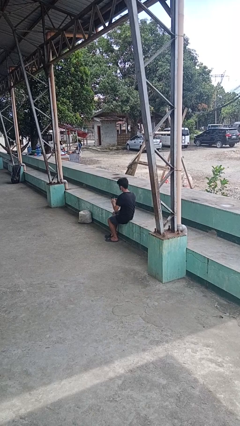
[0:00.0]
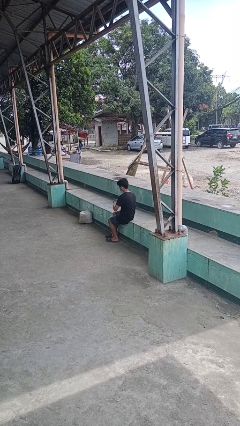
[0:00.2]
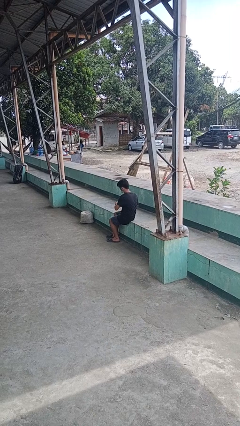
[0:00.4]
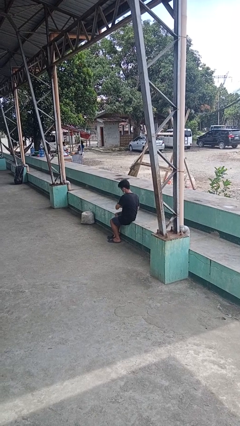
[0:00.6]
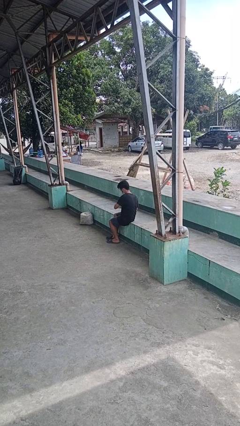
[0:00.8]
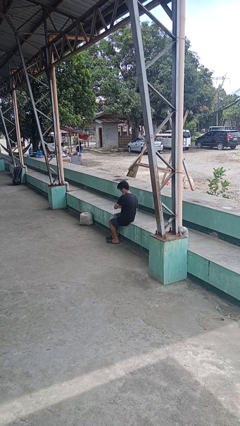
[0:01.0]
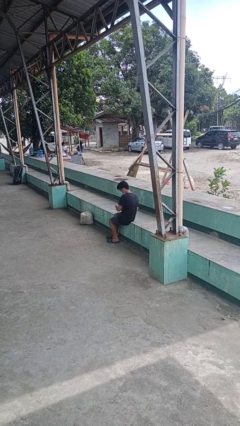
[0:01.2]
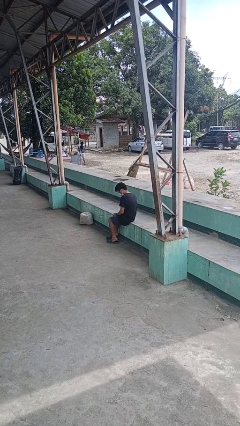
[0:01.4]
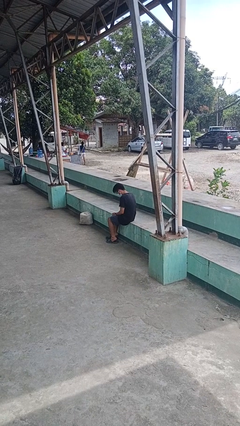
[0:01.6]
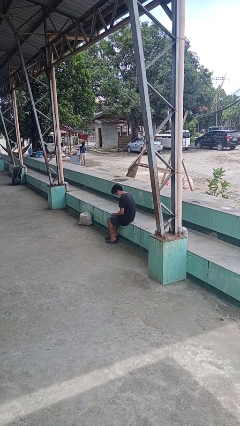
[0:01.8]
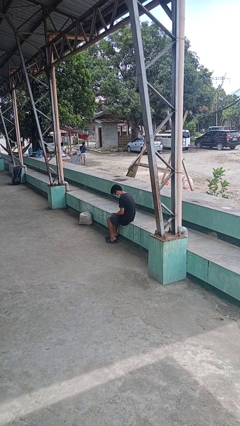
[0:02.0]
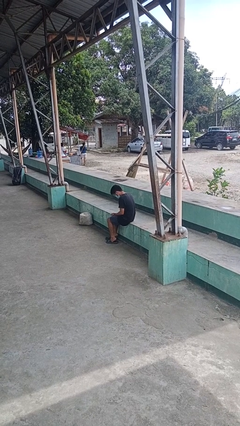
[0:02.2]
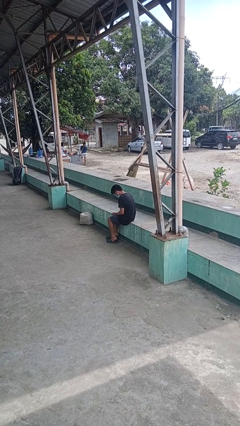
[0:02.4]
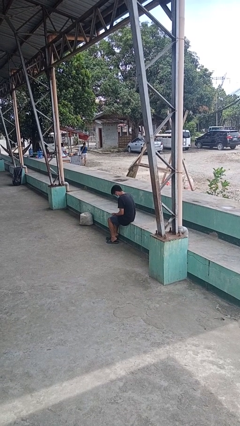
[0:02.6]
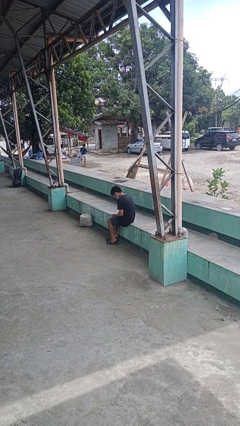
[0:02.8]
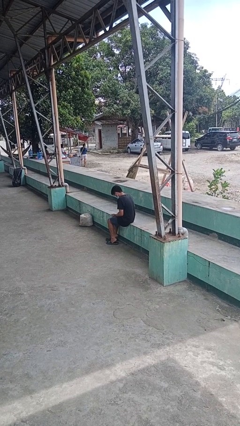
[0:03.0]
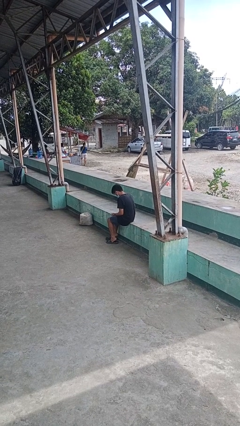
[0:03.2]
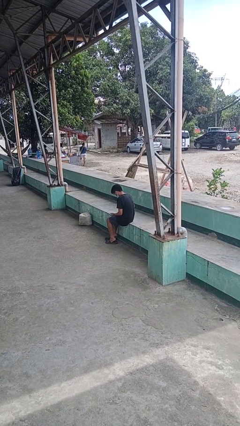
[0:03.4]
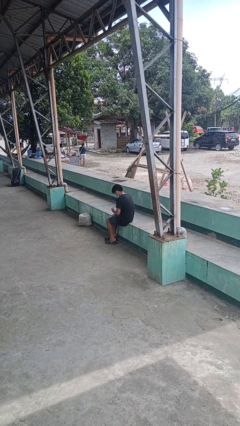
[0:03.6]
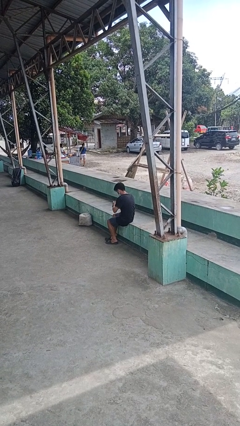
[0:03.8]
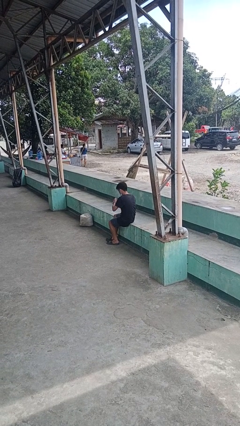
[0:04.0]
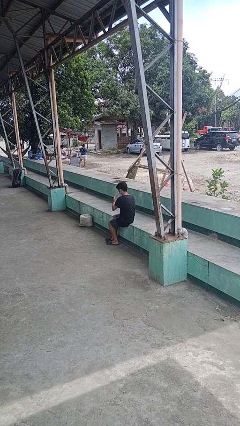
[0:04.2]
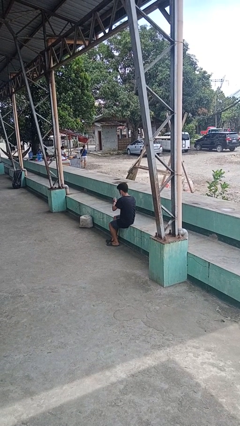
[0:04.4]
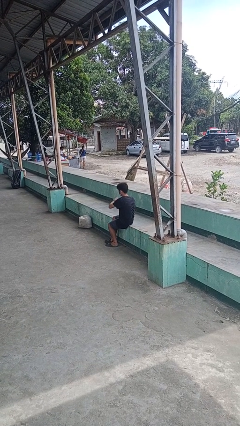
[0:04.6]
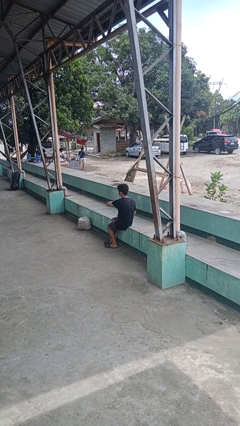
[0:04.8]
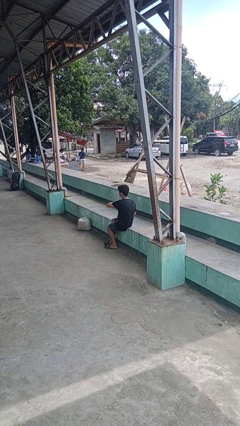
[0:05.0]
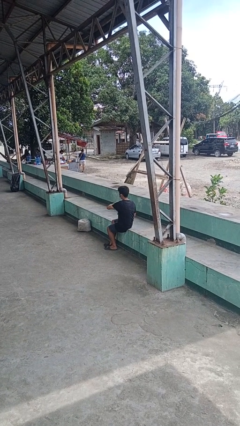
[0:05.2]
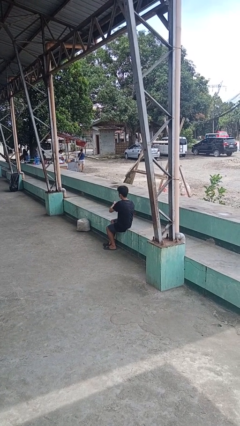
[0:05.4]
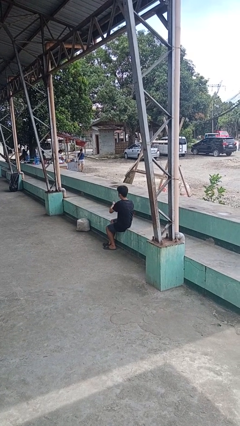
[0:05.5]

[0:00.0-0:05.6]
person puts on wristwatch

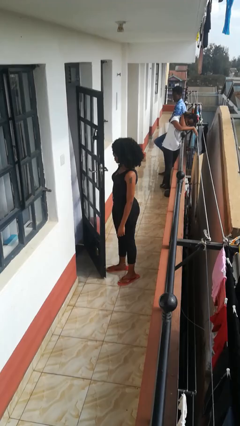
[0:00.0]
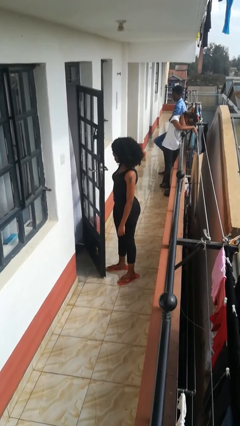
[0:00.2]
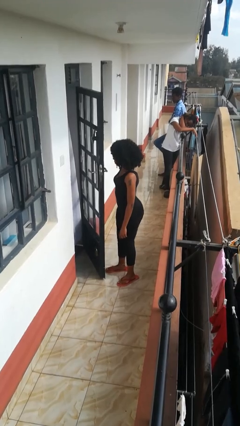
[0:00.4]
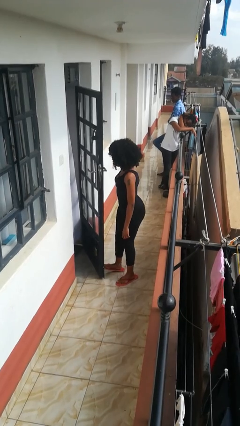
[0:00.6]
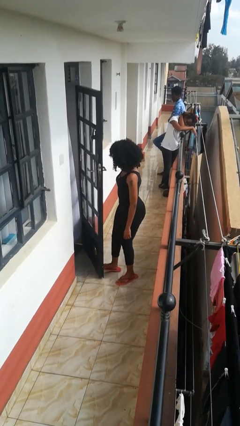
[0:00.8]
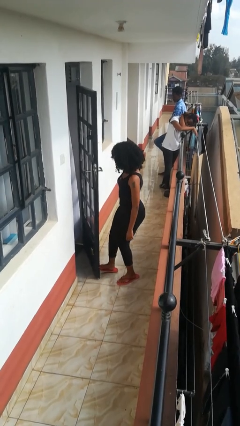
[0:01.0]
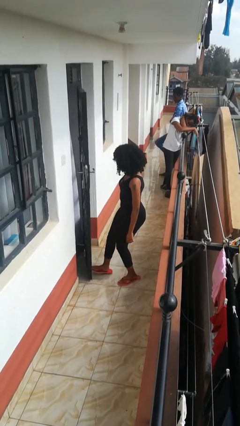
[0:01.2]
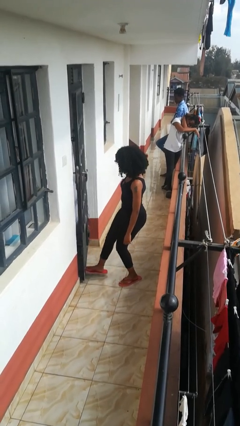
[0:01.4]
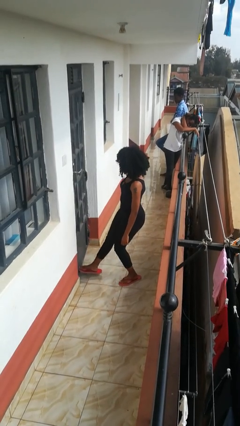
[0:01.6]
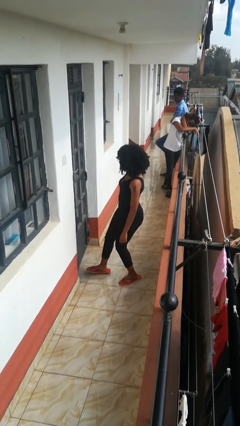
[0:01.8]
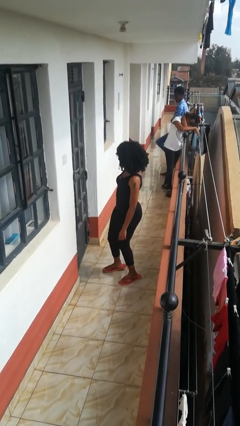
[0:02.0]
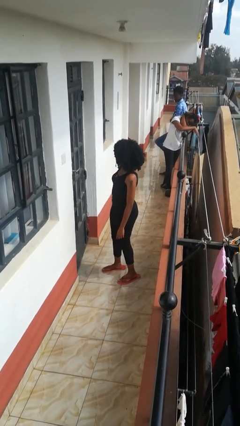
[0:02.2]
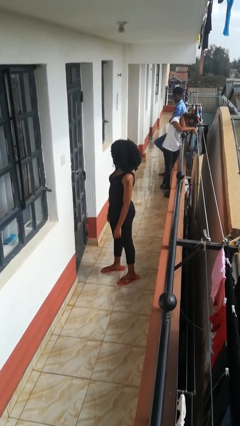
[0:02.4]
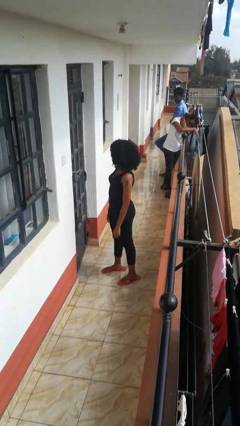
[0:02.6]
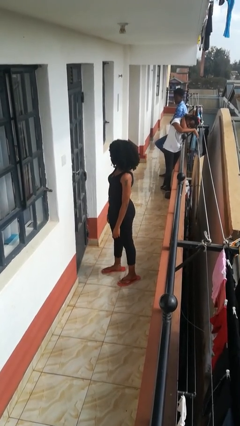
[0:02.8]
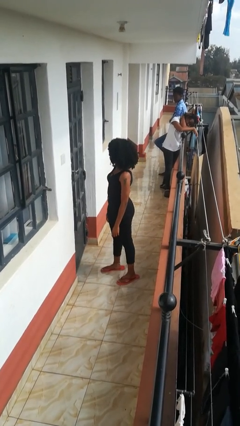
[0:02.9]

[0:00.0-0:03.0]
person closes door with foot

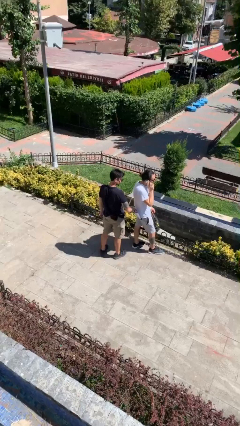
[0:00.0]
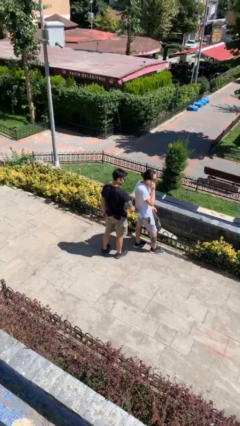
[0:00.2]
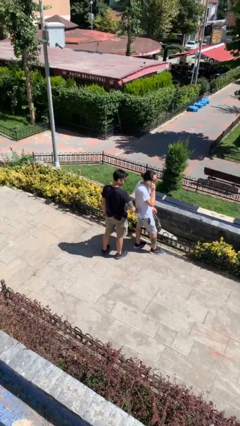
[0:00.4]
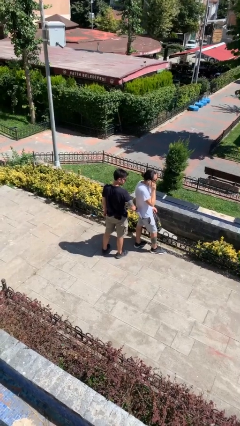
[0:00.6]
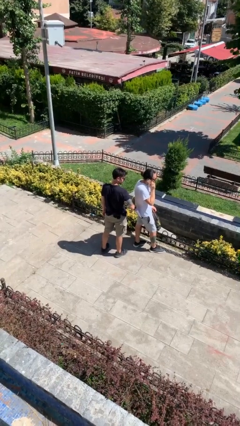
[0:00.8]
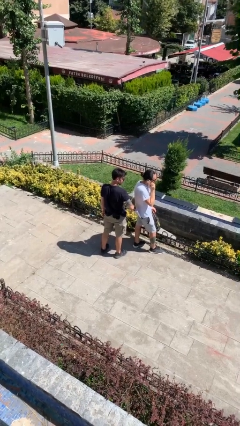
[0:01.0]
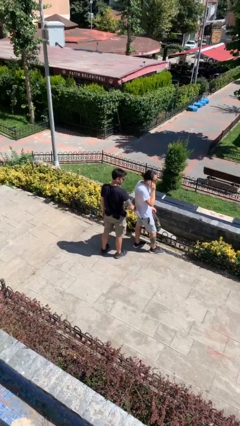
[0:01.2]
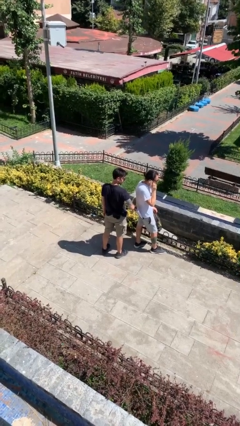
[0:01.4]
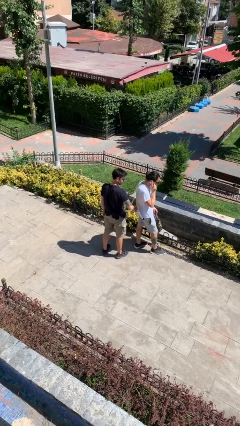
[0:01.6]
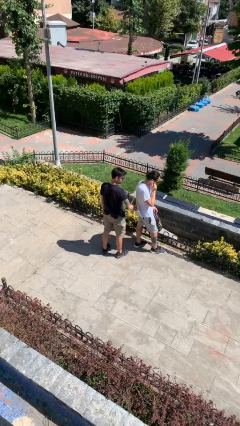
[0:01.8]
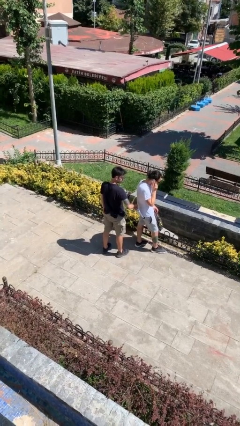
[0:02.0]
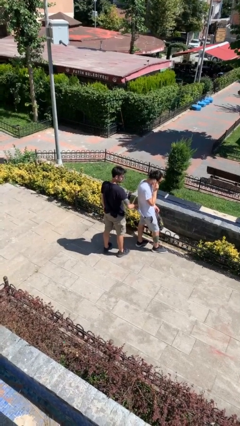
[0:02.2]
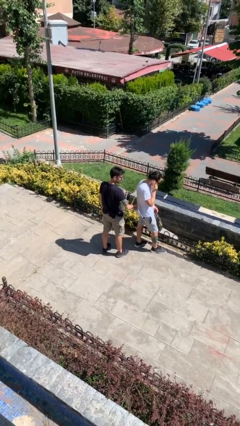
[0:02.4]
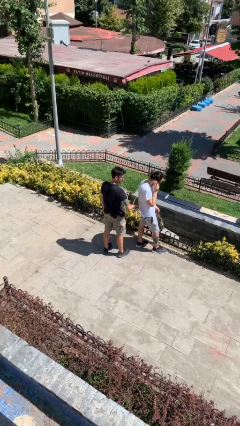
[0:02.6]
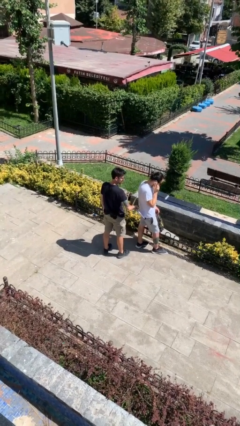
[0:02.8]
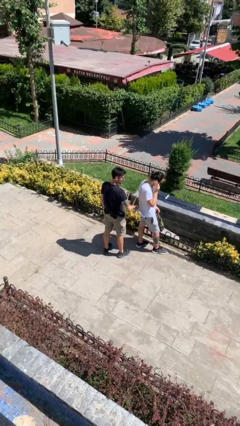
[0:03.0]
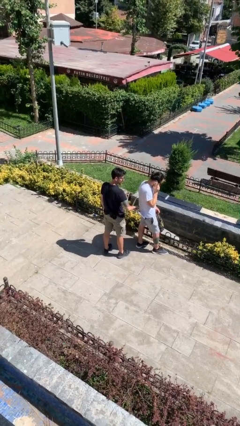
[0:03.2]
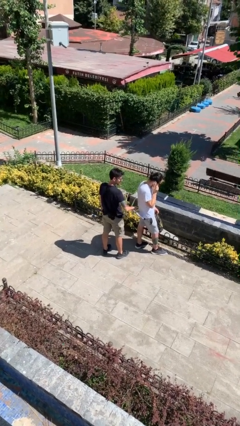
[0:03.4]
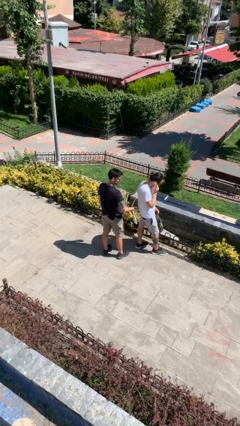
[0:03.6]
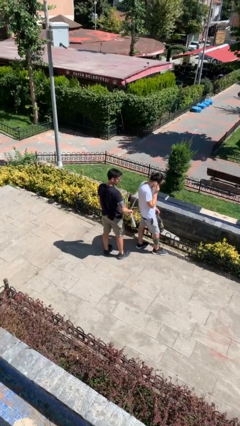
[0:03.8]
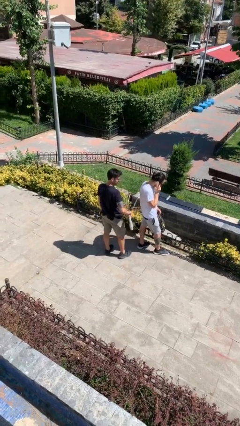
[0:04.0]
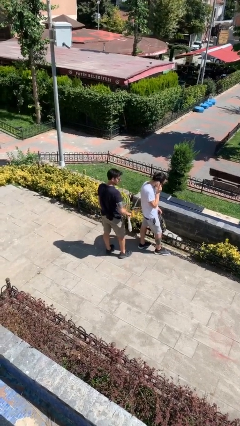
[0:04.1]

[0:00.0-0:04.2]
person steals object from person

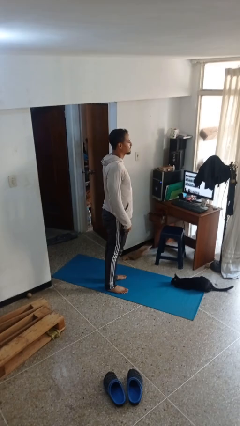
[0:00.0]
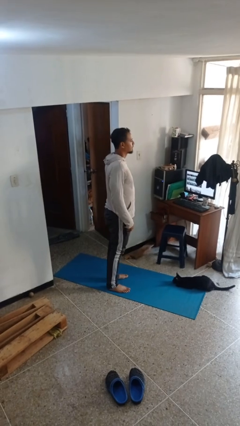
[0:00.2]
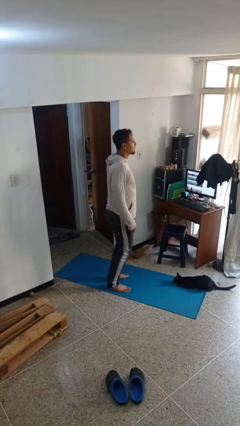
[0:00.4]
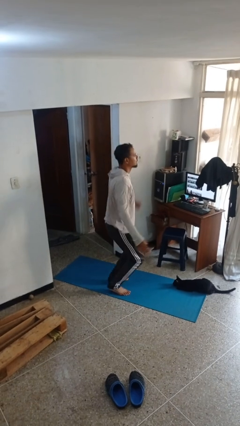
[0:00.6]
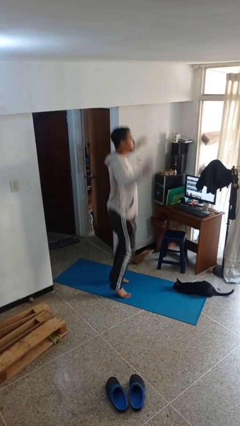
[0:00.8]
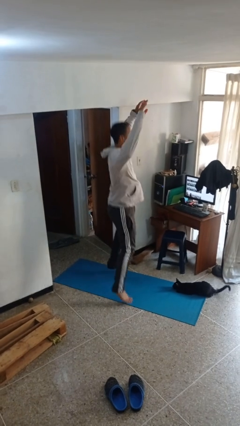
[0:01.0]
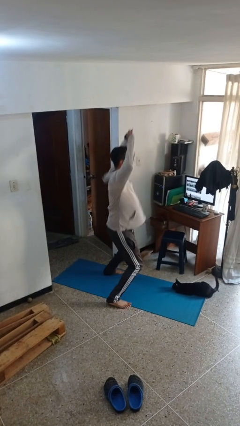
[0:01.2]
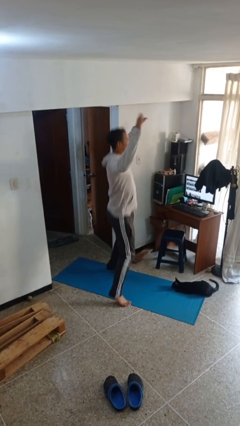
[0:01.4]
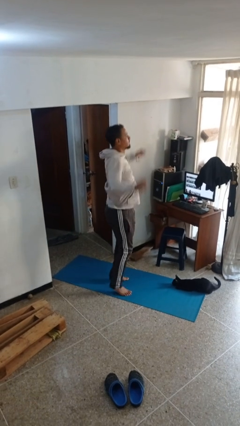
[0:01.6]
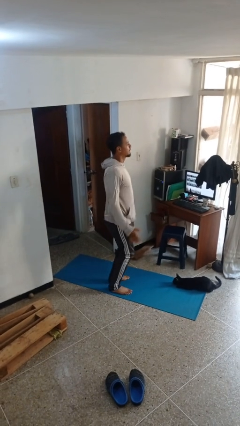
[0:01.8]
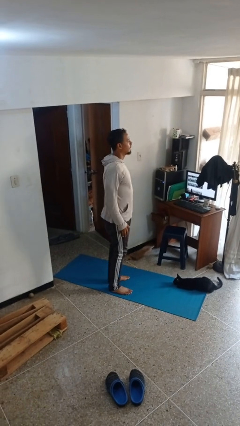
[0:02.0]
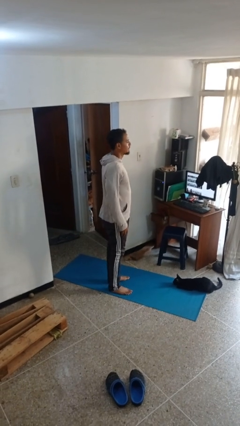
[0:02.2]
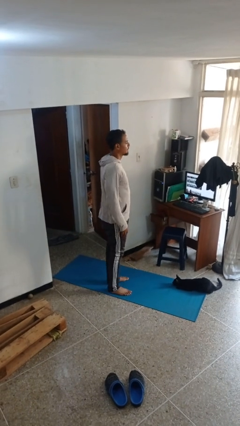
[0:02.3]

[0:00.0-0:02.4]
person exercises with jumping jacks

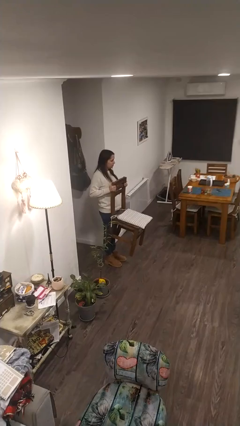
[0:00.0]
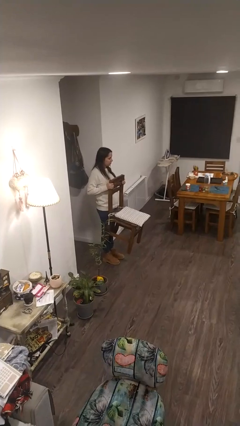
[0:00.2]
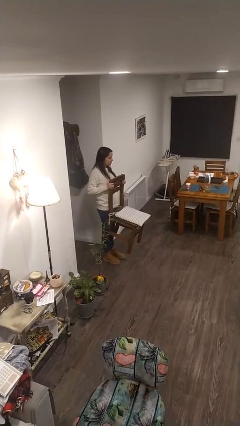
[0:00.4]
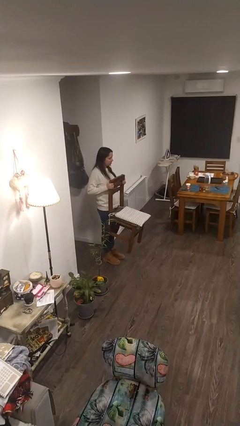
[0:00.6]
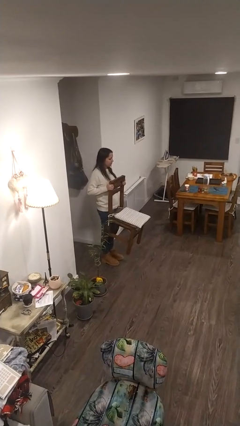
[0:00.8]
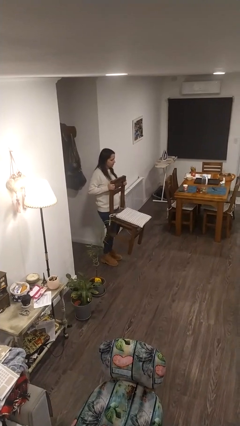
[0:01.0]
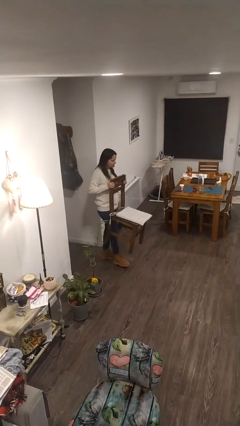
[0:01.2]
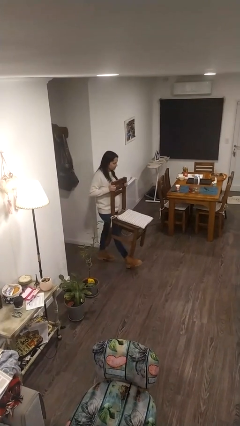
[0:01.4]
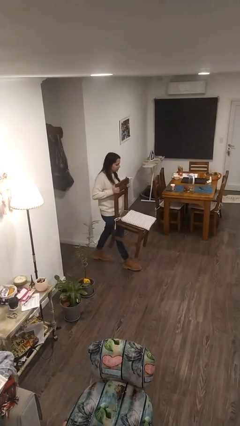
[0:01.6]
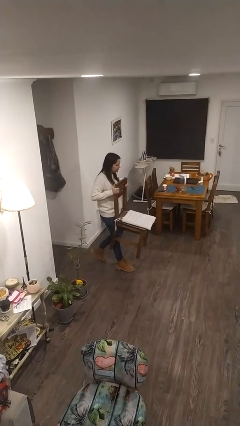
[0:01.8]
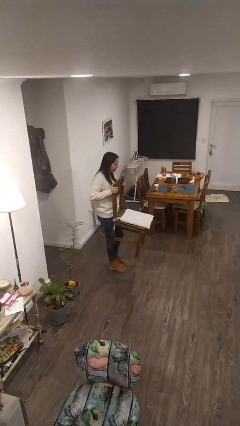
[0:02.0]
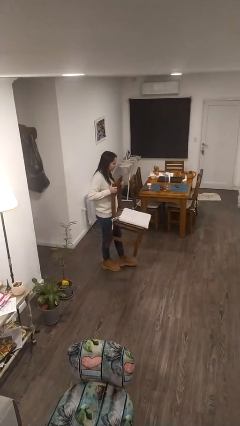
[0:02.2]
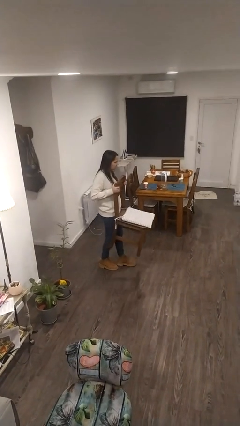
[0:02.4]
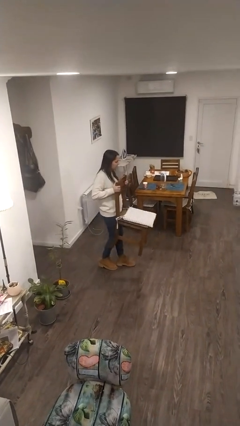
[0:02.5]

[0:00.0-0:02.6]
person carries furniture
